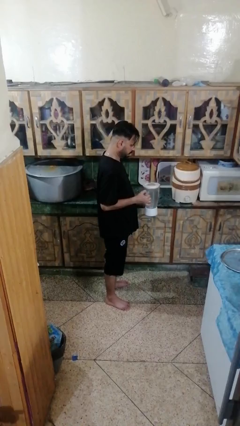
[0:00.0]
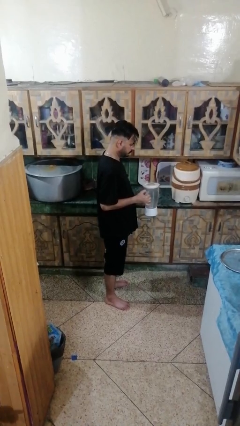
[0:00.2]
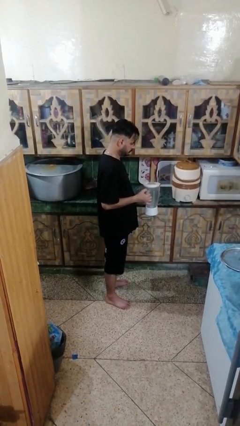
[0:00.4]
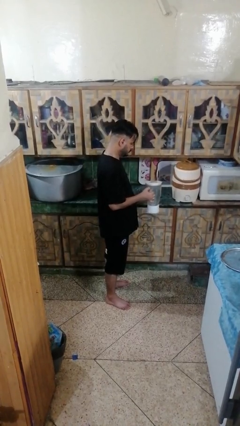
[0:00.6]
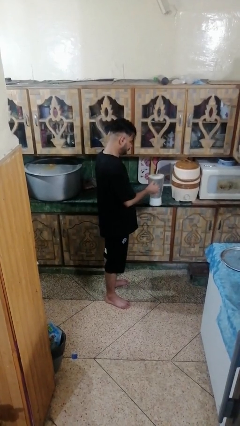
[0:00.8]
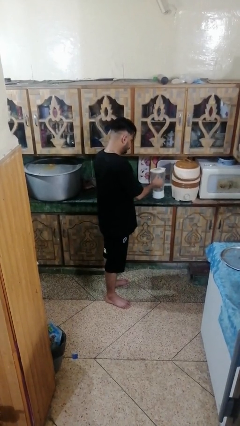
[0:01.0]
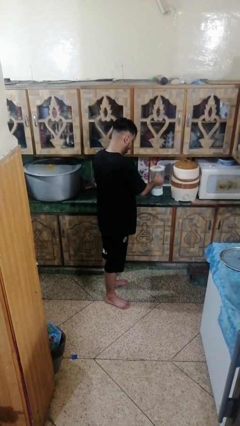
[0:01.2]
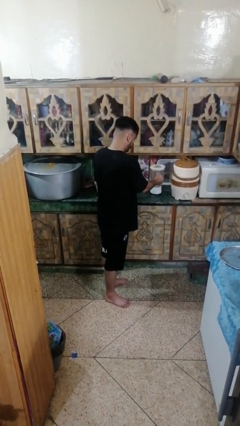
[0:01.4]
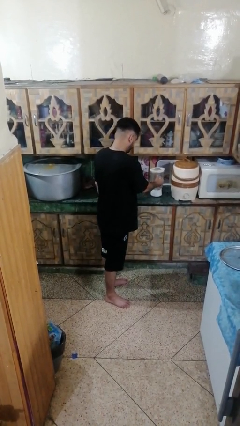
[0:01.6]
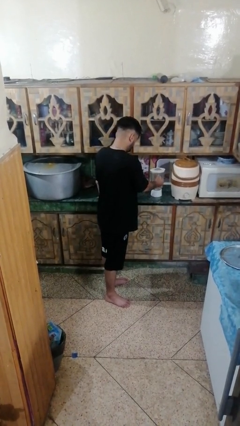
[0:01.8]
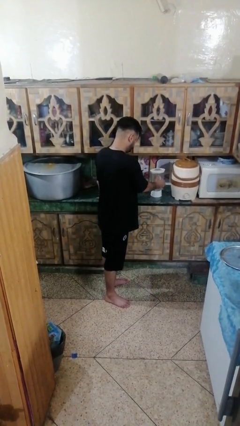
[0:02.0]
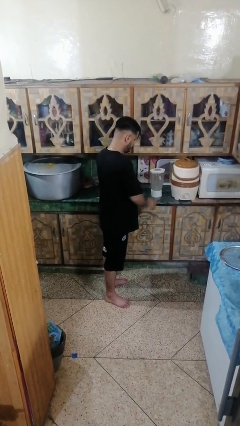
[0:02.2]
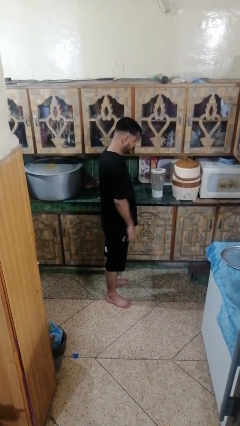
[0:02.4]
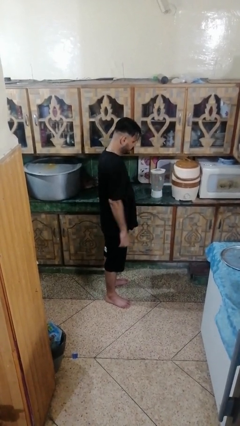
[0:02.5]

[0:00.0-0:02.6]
person puts down object on countertop

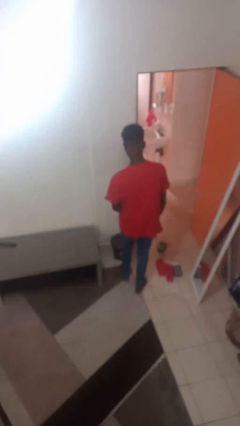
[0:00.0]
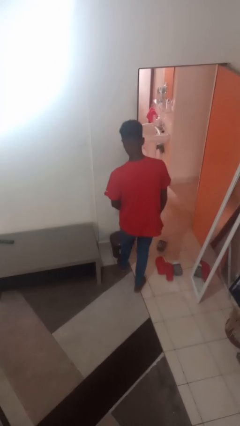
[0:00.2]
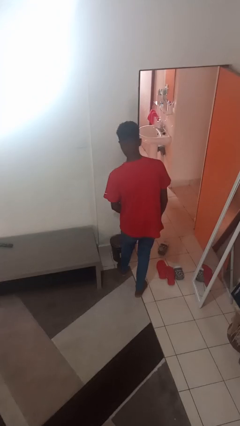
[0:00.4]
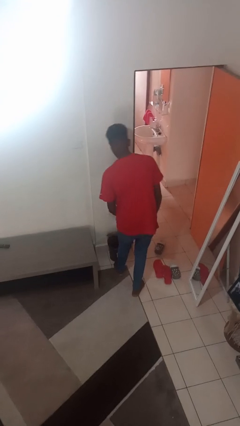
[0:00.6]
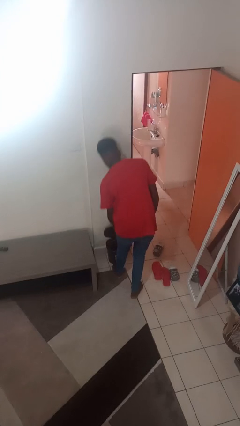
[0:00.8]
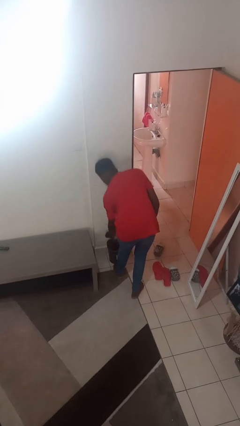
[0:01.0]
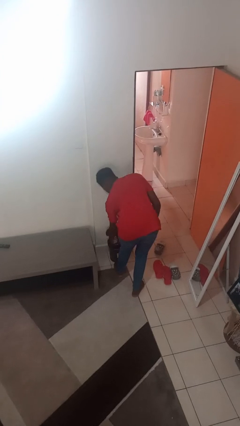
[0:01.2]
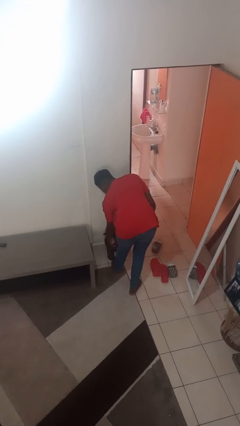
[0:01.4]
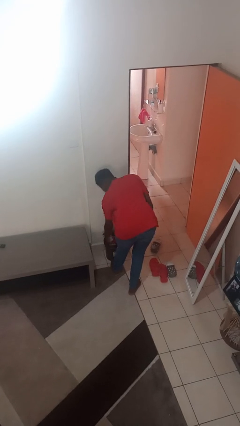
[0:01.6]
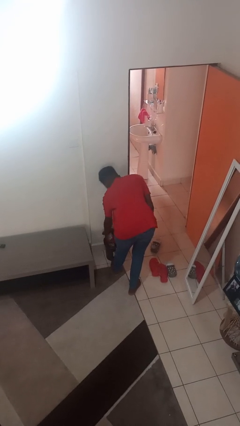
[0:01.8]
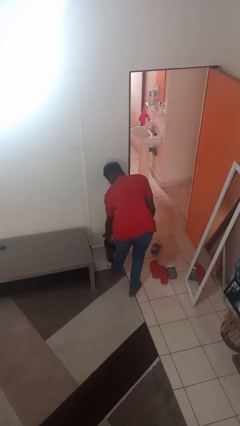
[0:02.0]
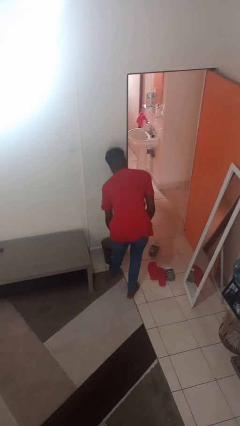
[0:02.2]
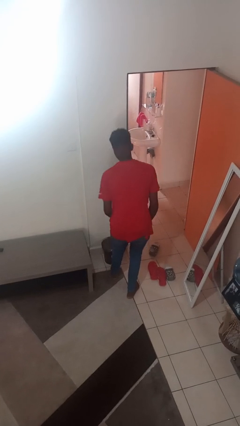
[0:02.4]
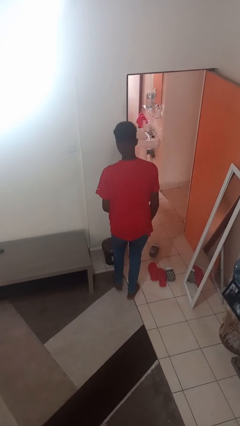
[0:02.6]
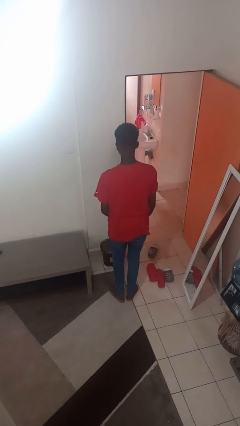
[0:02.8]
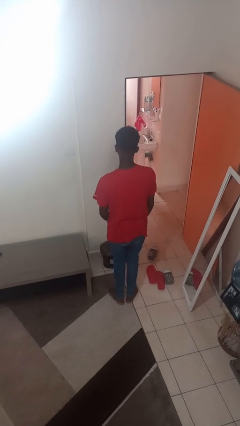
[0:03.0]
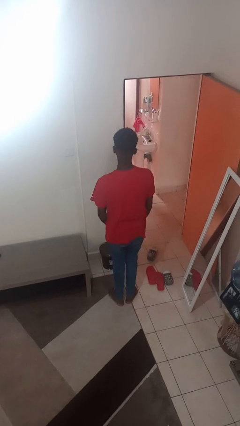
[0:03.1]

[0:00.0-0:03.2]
person discards trash

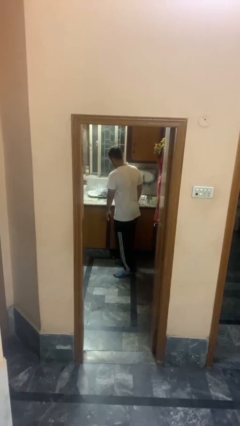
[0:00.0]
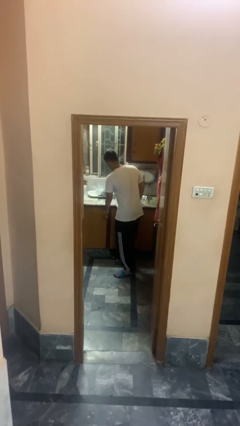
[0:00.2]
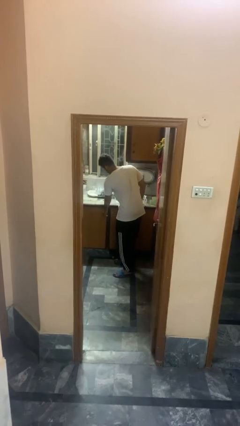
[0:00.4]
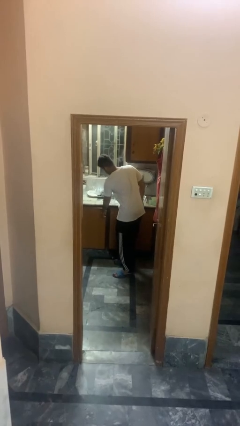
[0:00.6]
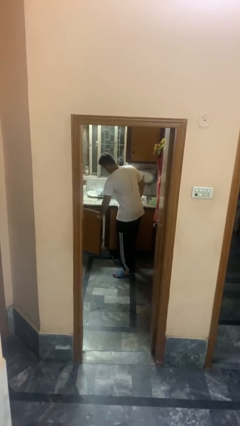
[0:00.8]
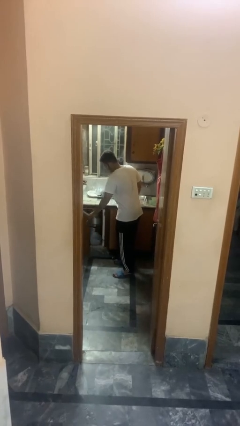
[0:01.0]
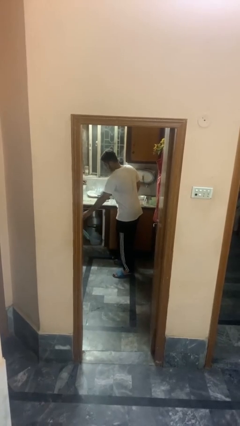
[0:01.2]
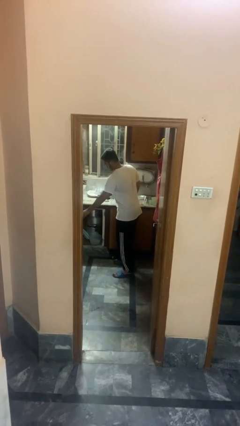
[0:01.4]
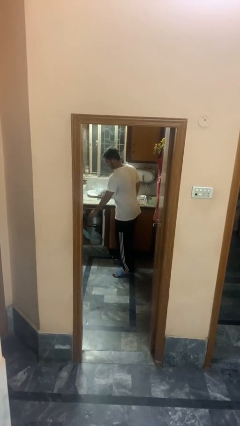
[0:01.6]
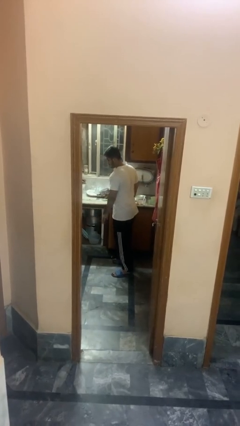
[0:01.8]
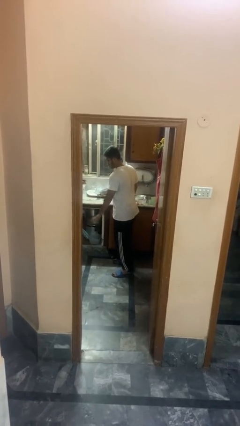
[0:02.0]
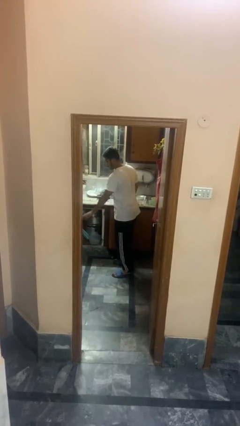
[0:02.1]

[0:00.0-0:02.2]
person opens cabinet

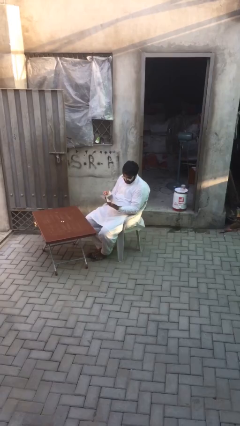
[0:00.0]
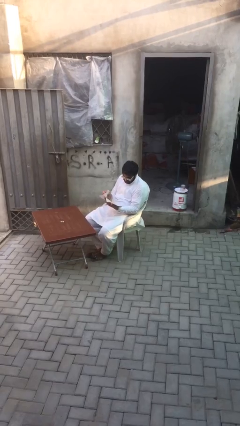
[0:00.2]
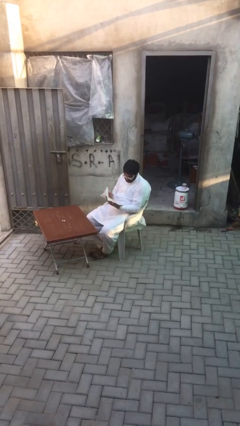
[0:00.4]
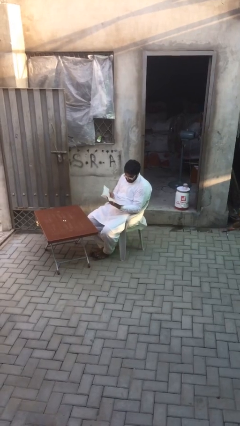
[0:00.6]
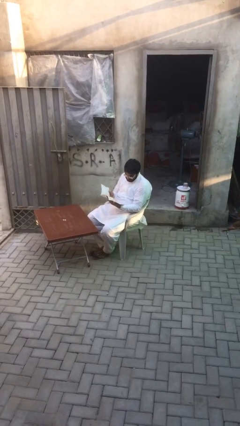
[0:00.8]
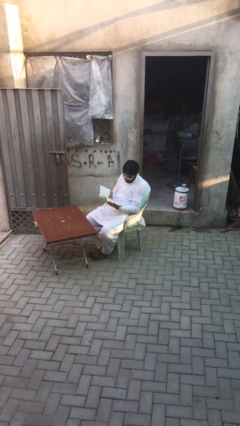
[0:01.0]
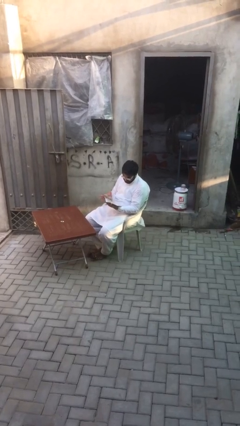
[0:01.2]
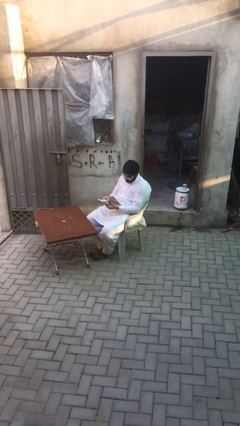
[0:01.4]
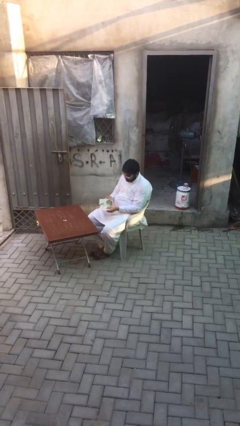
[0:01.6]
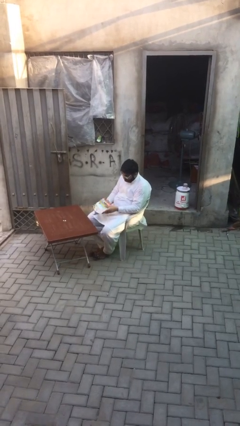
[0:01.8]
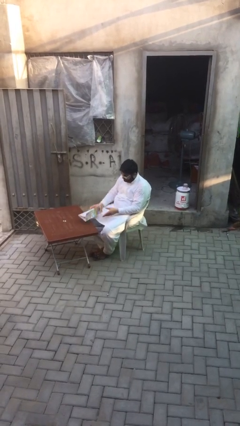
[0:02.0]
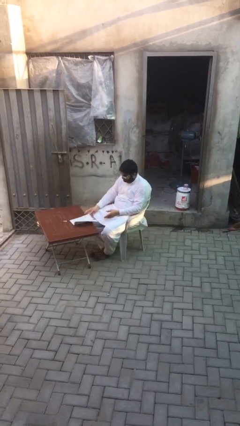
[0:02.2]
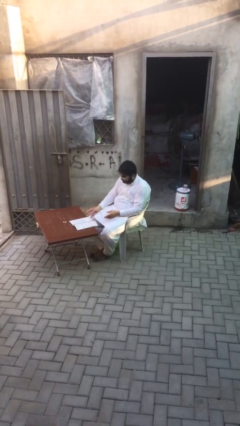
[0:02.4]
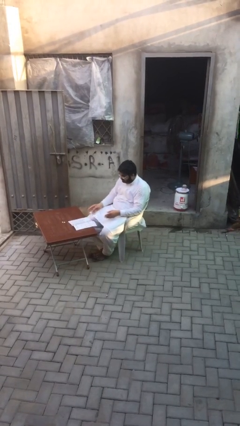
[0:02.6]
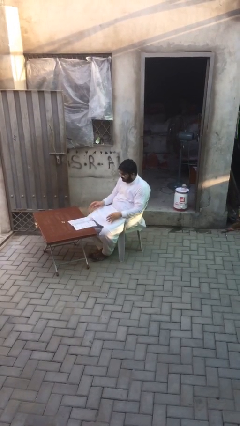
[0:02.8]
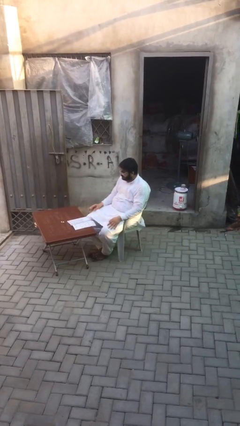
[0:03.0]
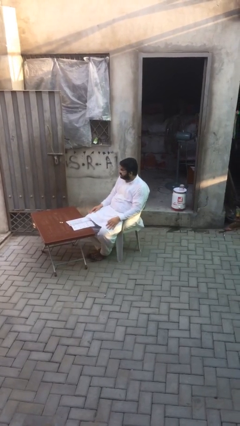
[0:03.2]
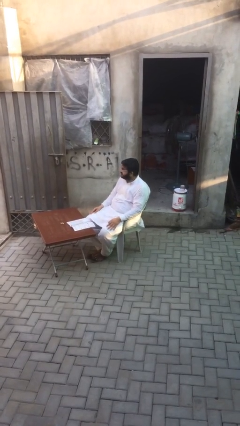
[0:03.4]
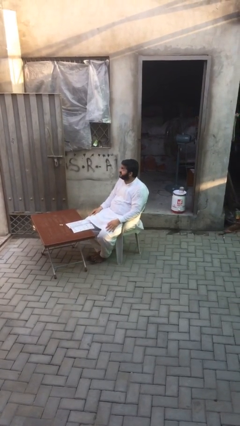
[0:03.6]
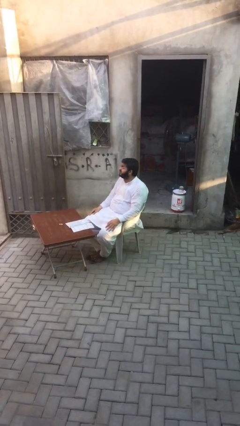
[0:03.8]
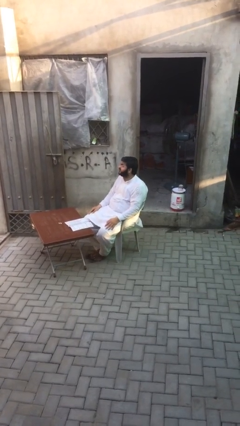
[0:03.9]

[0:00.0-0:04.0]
person puts down object on table

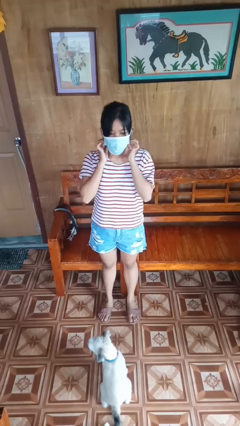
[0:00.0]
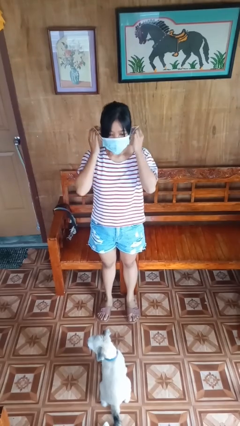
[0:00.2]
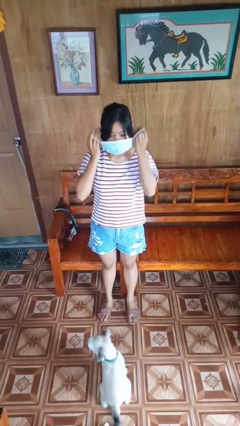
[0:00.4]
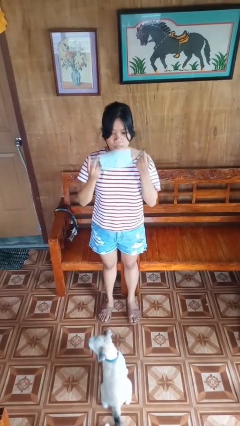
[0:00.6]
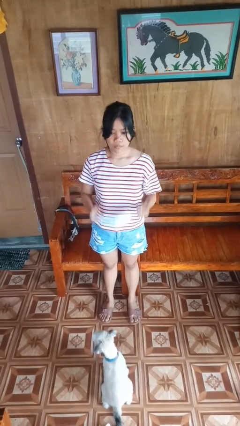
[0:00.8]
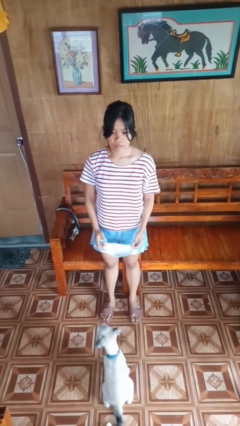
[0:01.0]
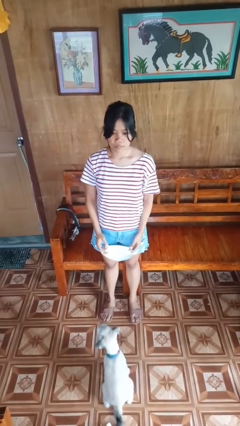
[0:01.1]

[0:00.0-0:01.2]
person takes off facemask

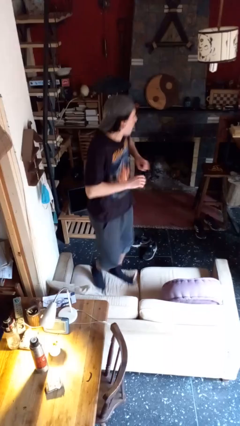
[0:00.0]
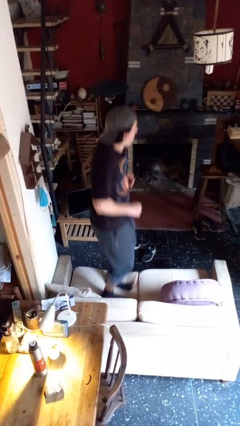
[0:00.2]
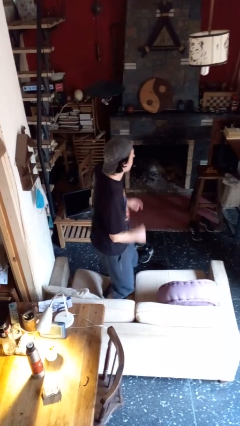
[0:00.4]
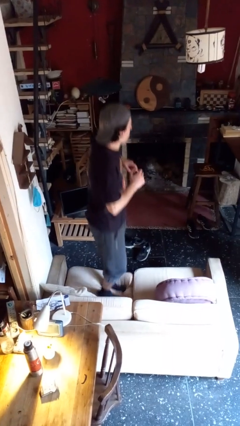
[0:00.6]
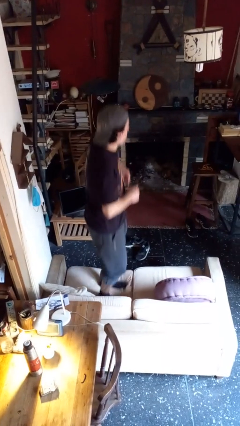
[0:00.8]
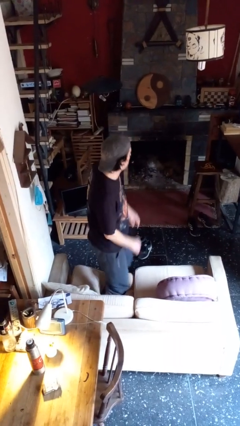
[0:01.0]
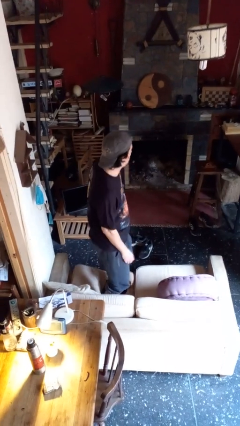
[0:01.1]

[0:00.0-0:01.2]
person jumps on couch

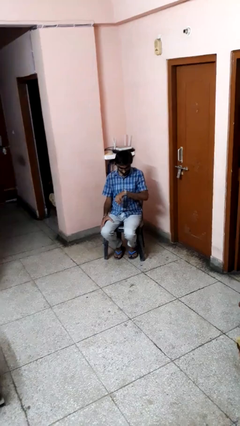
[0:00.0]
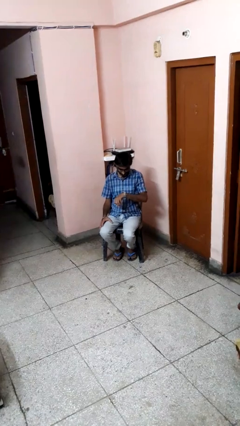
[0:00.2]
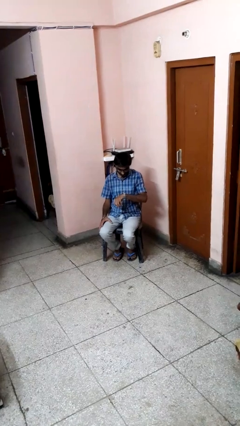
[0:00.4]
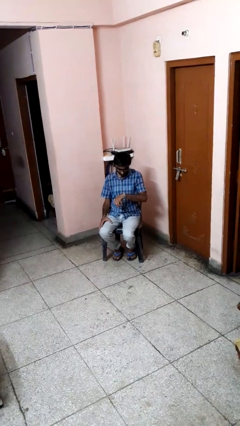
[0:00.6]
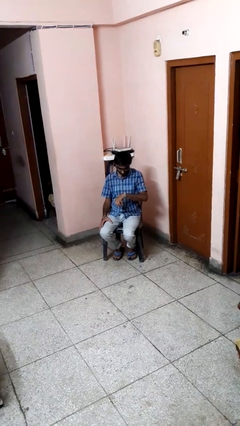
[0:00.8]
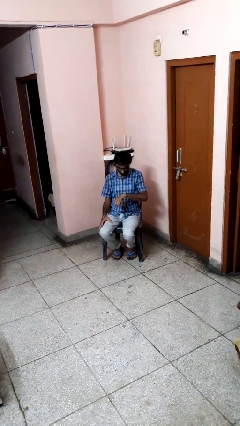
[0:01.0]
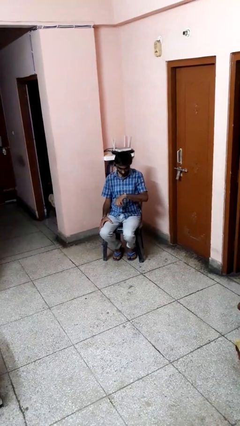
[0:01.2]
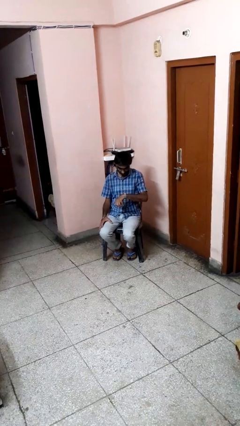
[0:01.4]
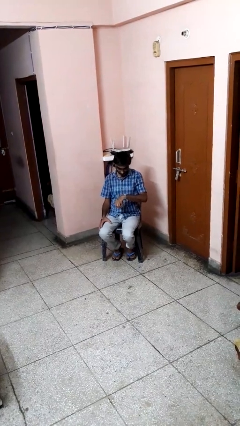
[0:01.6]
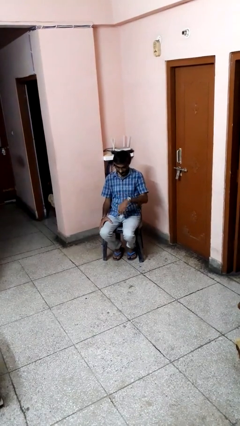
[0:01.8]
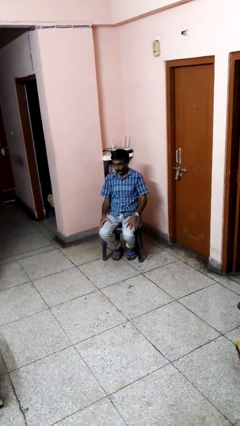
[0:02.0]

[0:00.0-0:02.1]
person looks at wristwatch

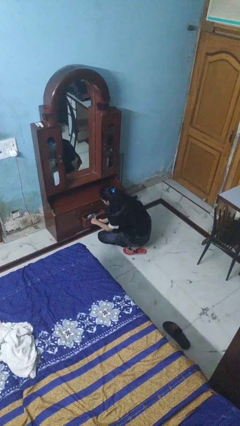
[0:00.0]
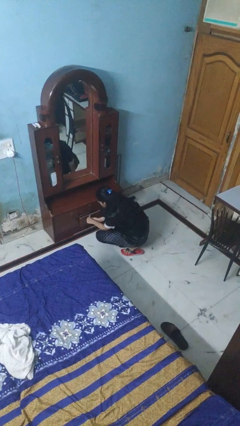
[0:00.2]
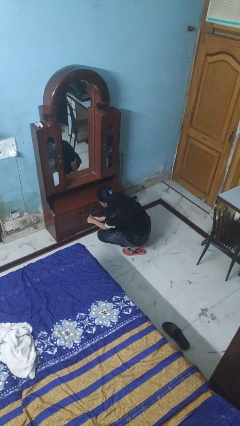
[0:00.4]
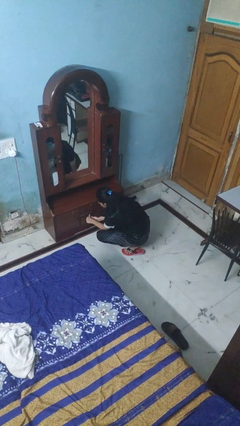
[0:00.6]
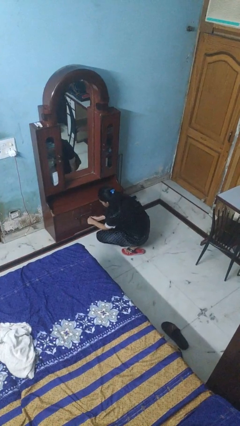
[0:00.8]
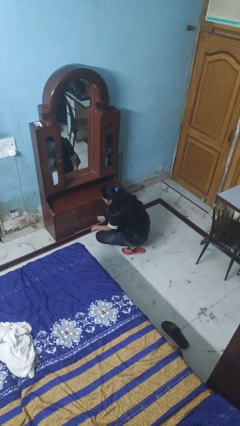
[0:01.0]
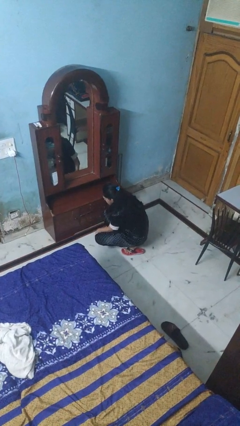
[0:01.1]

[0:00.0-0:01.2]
person closes dresser drawer
